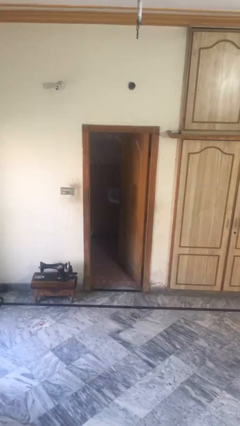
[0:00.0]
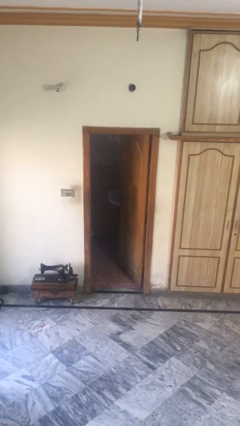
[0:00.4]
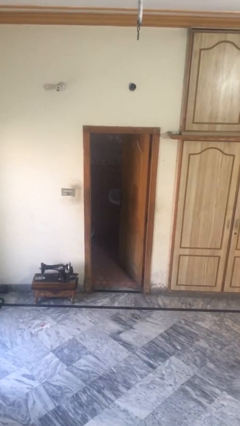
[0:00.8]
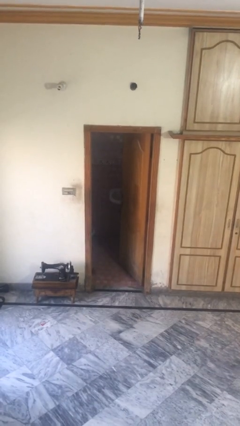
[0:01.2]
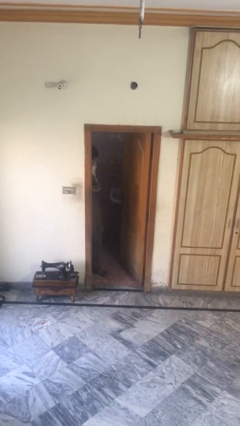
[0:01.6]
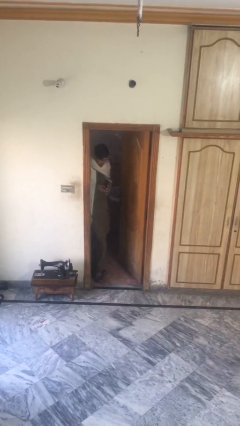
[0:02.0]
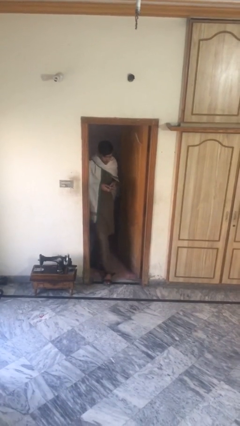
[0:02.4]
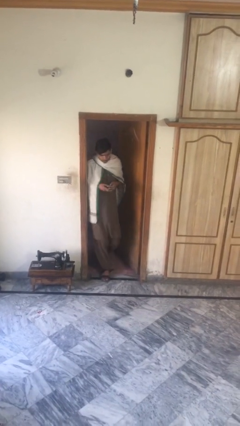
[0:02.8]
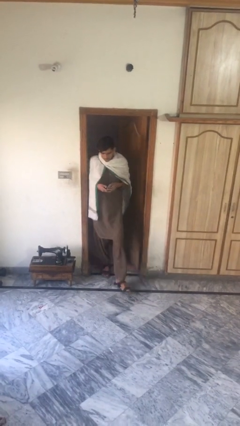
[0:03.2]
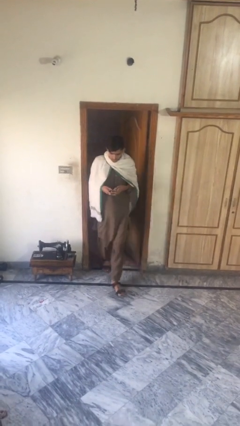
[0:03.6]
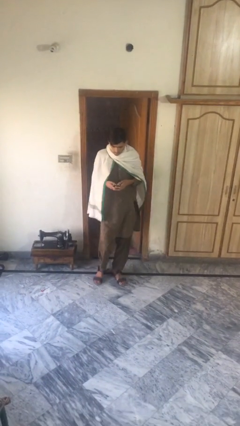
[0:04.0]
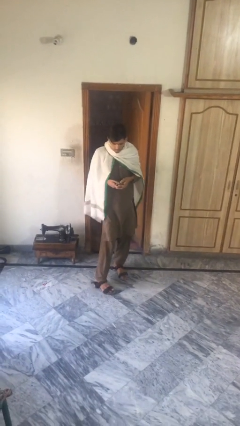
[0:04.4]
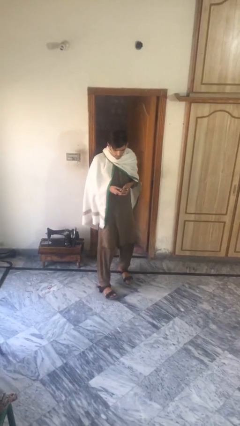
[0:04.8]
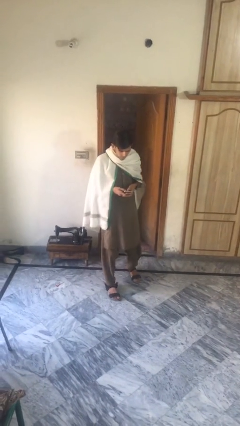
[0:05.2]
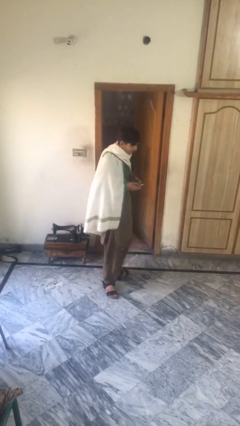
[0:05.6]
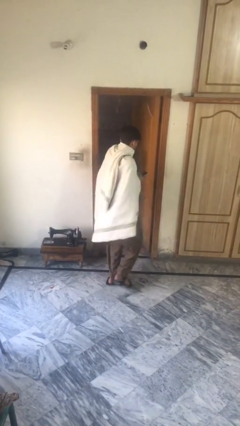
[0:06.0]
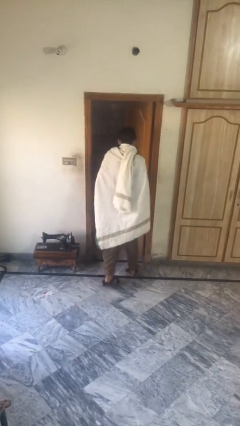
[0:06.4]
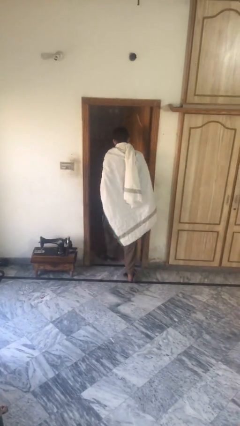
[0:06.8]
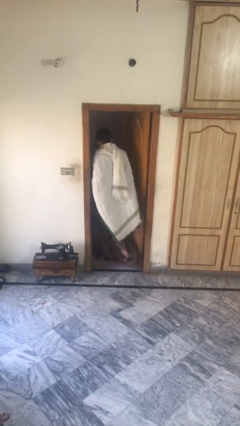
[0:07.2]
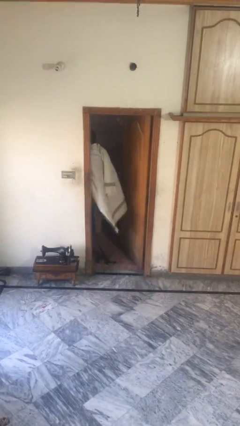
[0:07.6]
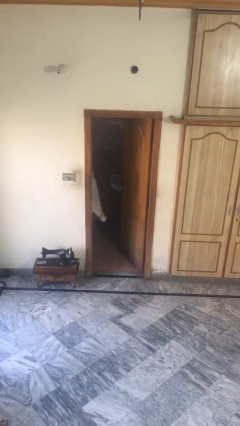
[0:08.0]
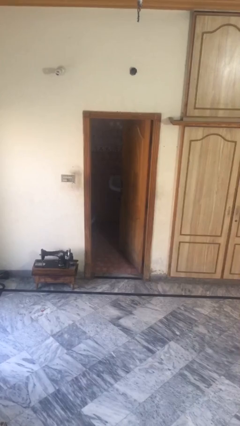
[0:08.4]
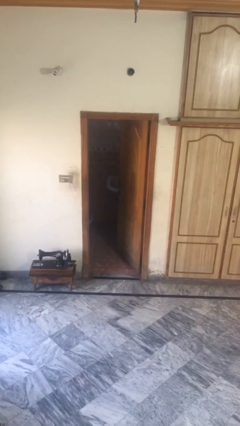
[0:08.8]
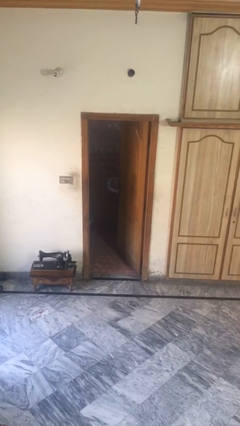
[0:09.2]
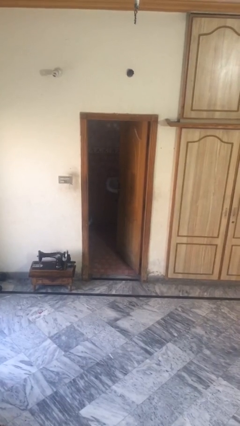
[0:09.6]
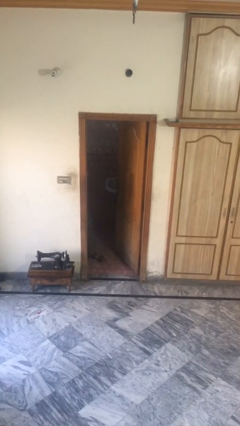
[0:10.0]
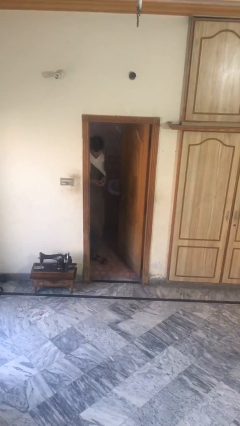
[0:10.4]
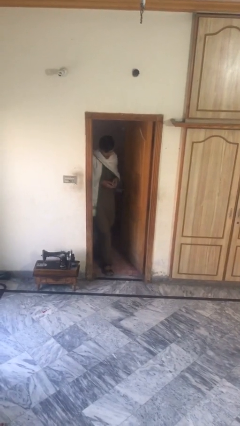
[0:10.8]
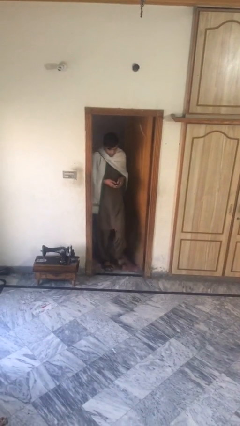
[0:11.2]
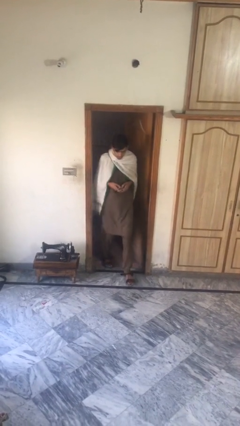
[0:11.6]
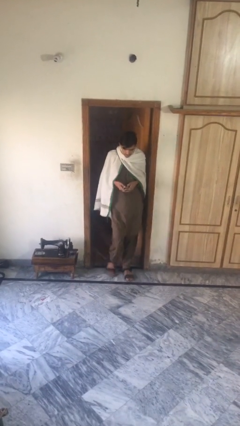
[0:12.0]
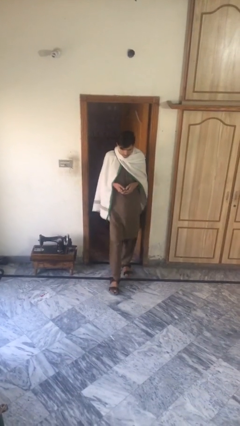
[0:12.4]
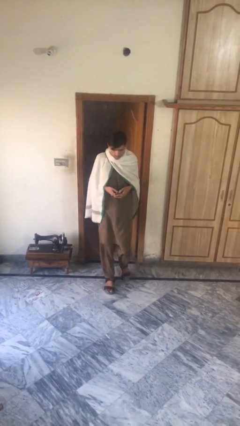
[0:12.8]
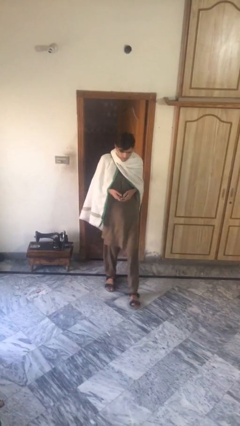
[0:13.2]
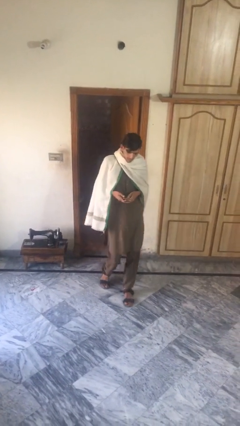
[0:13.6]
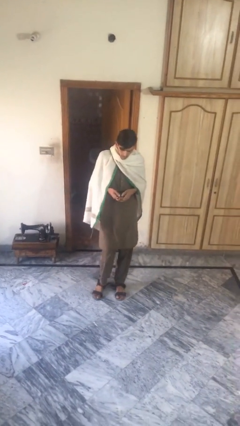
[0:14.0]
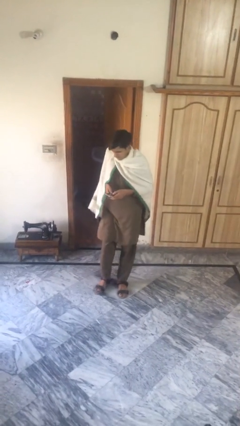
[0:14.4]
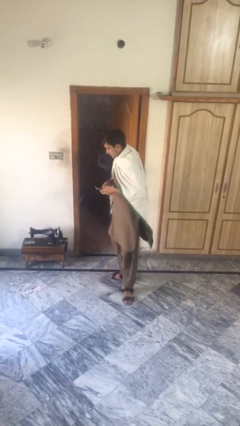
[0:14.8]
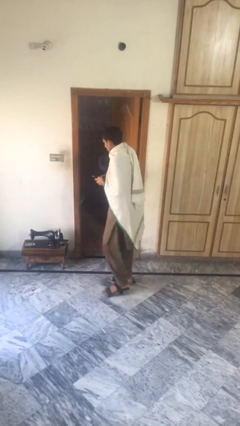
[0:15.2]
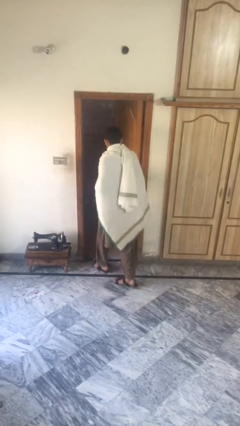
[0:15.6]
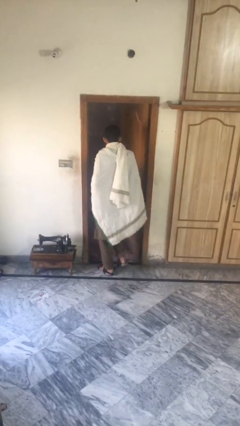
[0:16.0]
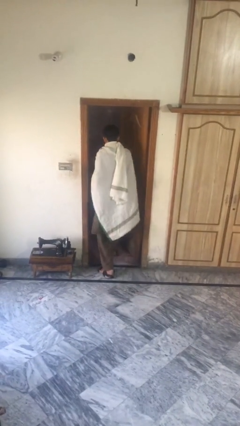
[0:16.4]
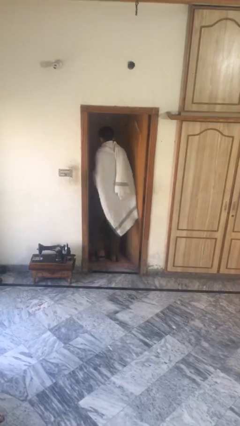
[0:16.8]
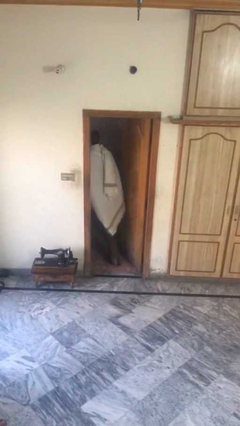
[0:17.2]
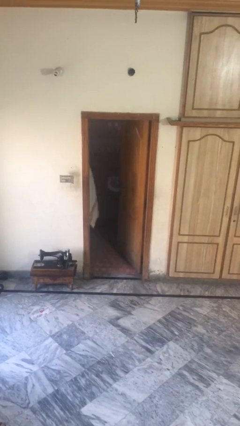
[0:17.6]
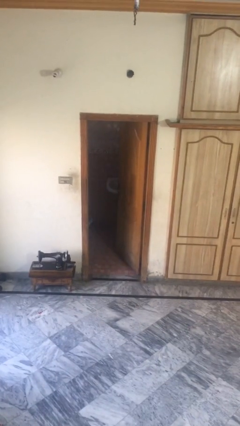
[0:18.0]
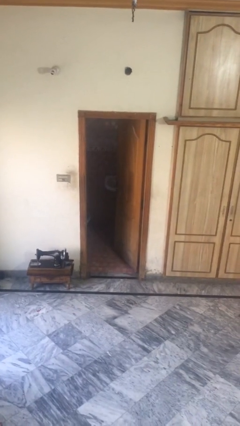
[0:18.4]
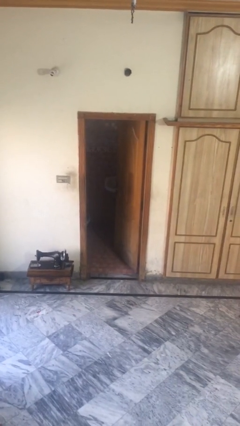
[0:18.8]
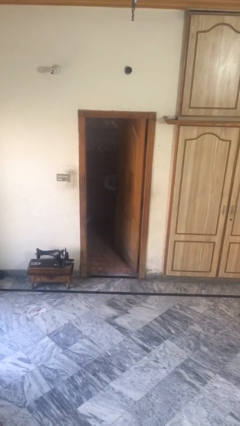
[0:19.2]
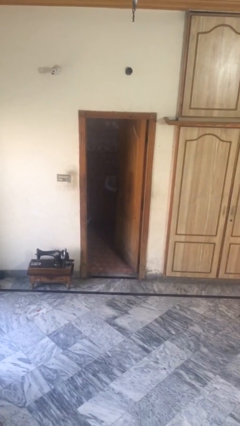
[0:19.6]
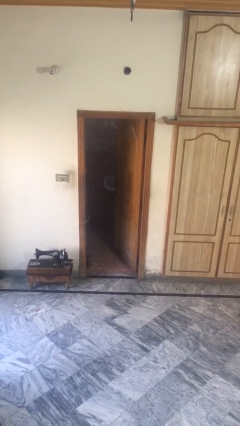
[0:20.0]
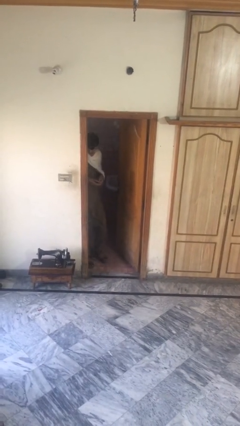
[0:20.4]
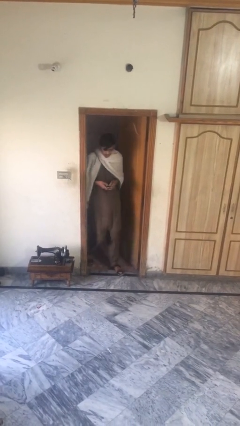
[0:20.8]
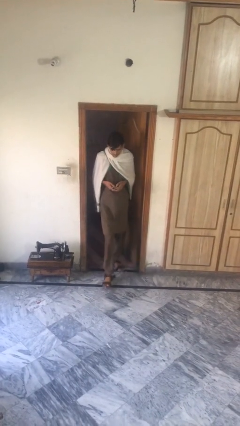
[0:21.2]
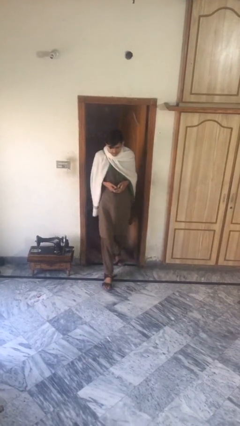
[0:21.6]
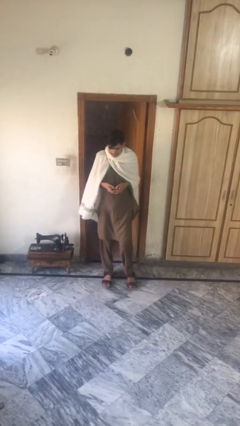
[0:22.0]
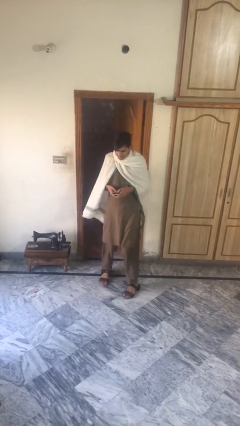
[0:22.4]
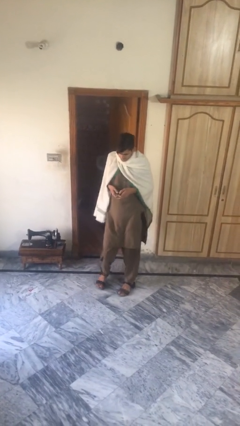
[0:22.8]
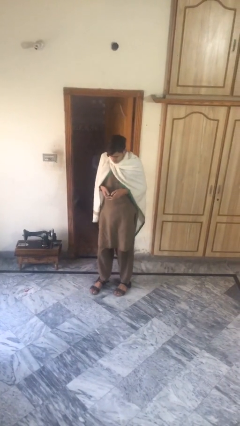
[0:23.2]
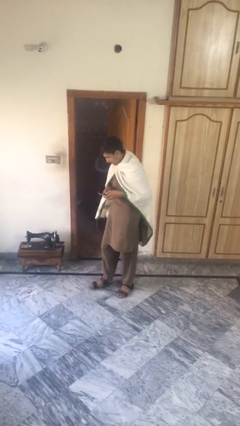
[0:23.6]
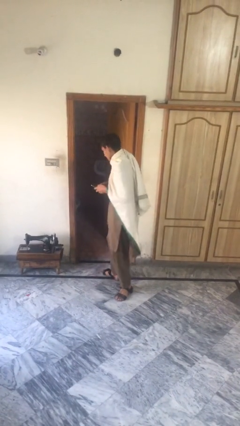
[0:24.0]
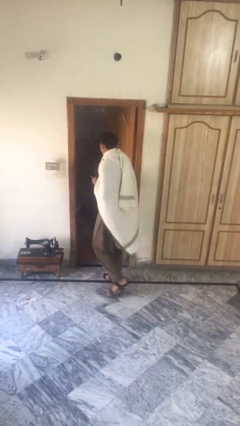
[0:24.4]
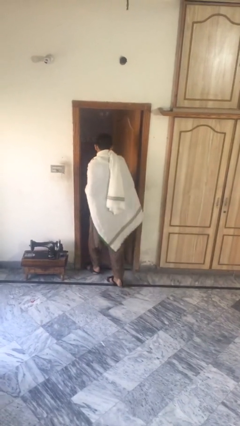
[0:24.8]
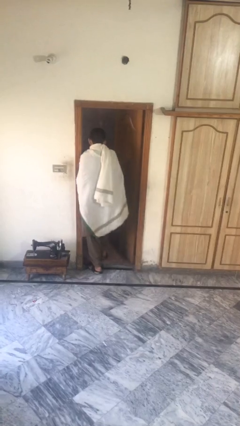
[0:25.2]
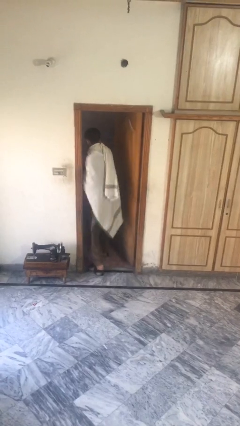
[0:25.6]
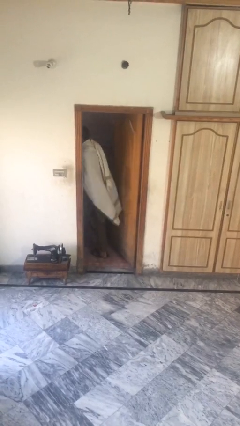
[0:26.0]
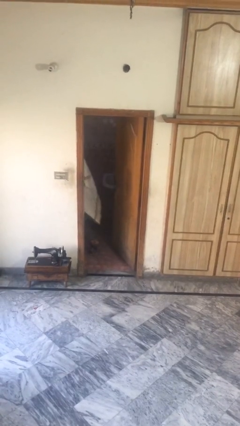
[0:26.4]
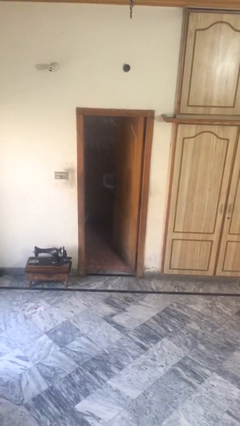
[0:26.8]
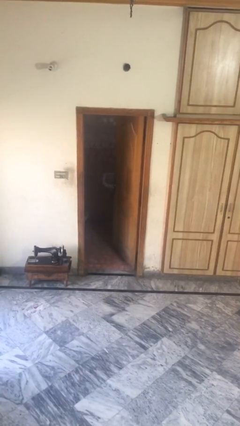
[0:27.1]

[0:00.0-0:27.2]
person texts on phone

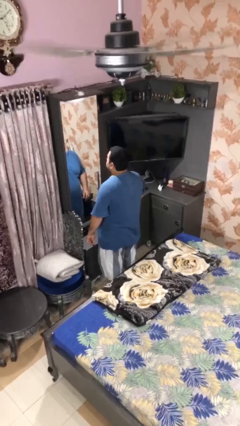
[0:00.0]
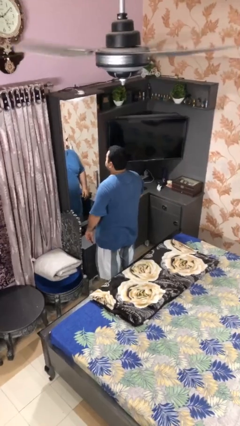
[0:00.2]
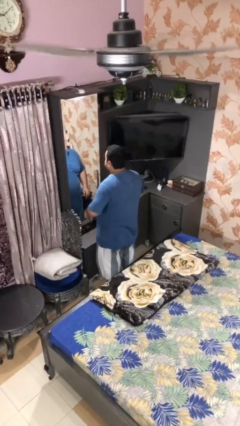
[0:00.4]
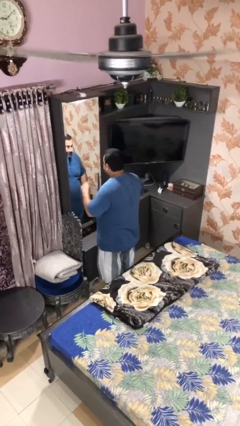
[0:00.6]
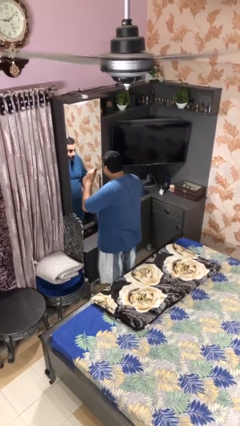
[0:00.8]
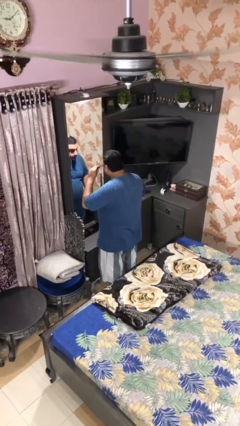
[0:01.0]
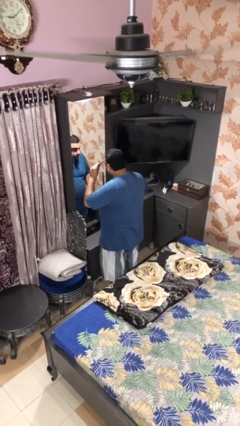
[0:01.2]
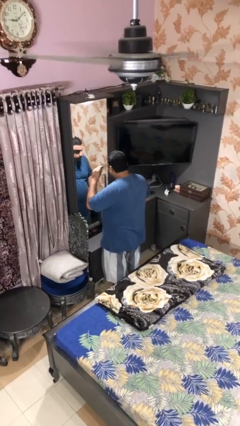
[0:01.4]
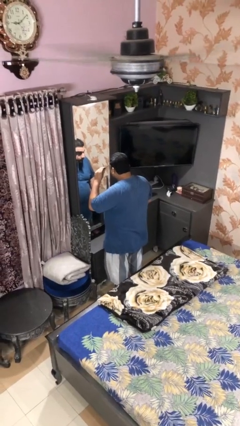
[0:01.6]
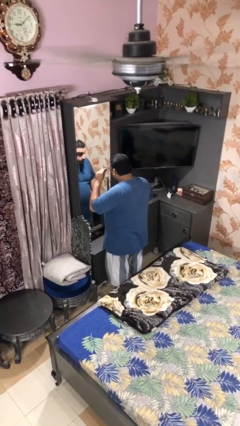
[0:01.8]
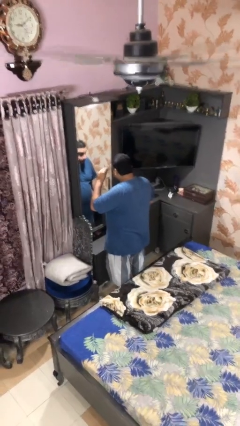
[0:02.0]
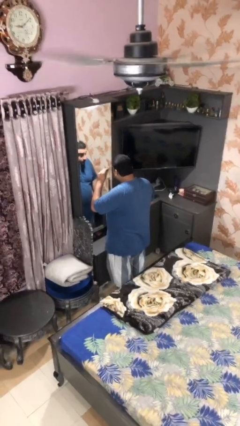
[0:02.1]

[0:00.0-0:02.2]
person applies eye makeup

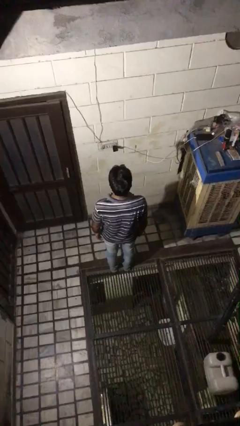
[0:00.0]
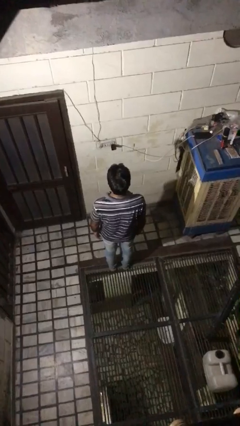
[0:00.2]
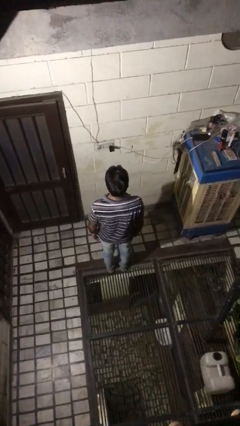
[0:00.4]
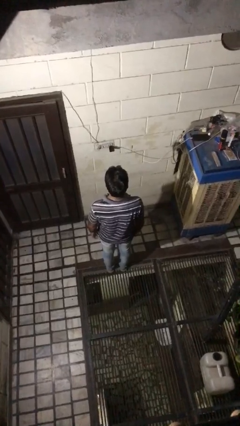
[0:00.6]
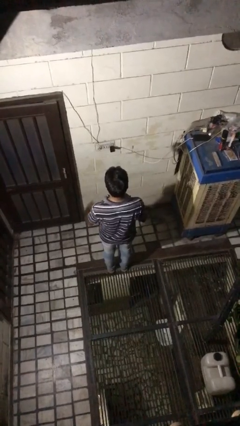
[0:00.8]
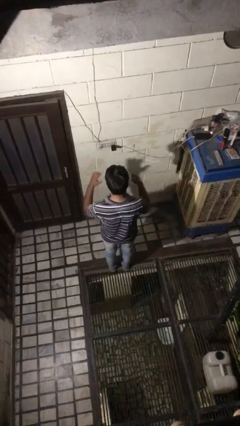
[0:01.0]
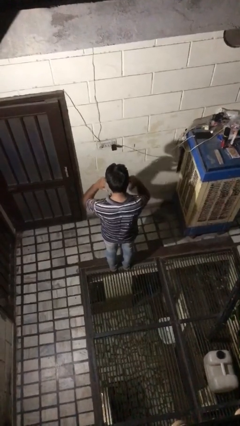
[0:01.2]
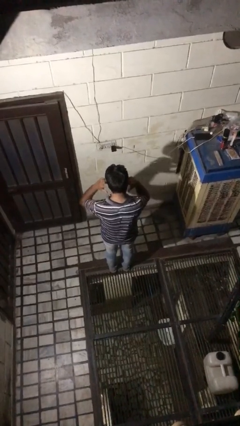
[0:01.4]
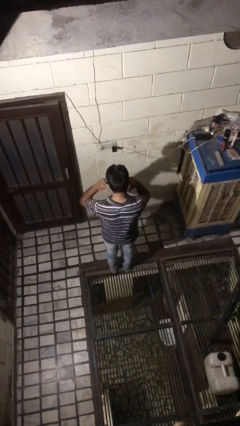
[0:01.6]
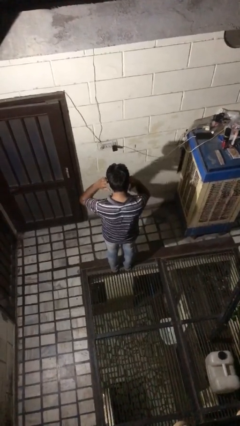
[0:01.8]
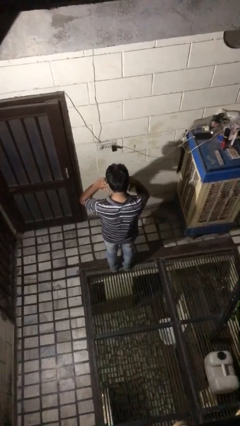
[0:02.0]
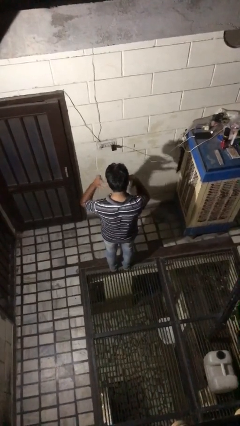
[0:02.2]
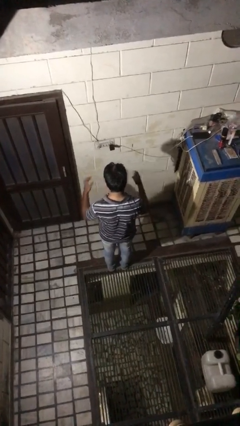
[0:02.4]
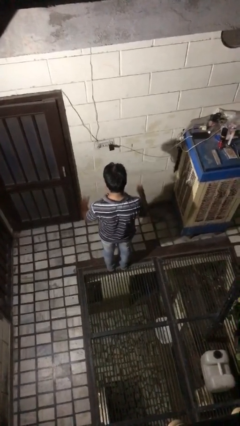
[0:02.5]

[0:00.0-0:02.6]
person puts fingers in ear
